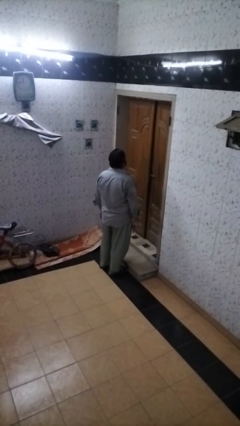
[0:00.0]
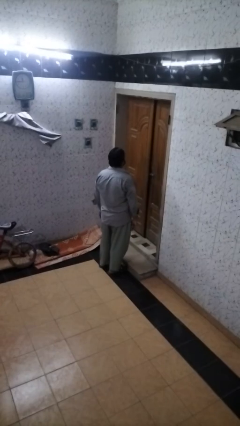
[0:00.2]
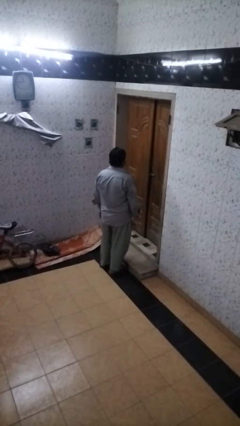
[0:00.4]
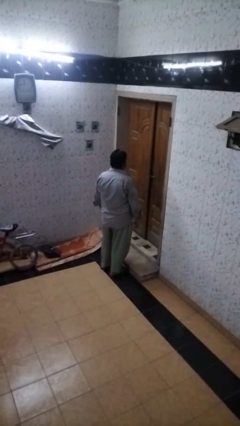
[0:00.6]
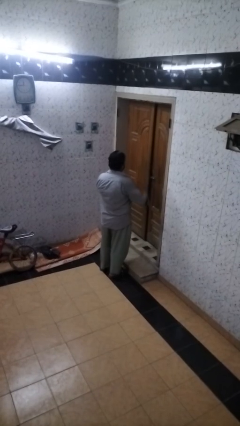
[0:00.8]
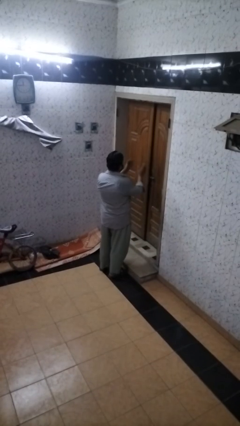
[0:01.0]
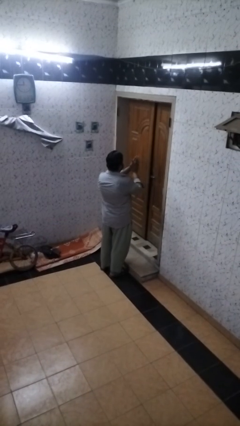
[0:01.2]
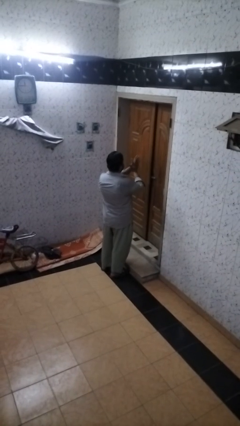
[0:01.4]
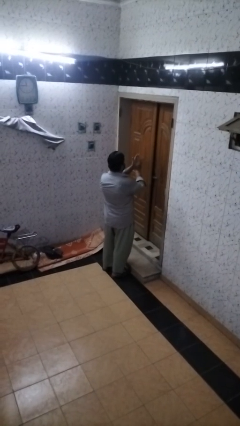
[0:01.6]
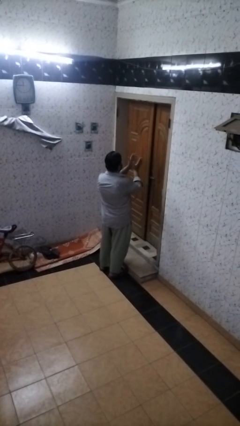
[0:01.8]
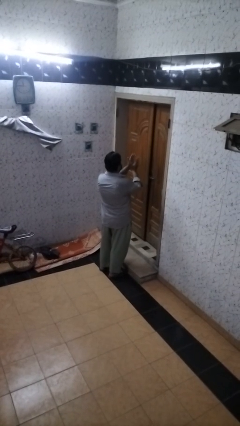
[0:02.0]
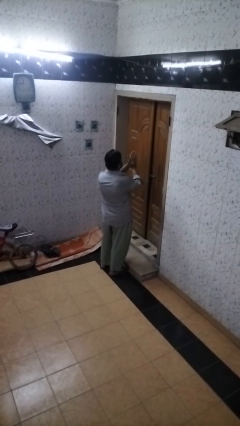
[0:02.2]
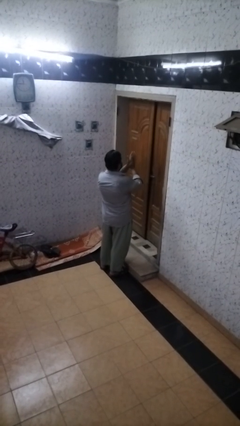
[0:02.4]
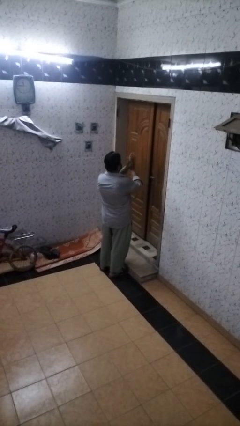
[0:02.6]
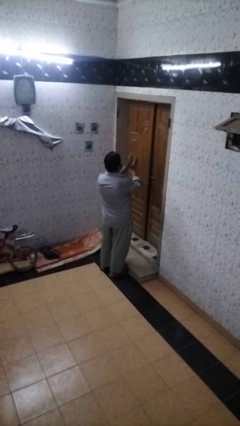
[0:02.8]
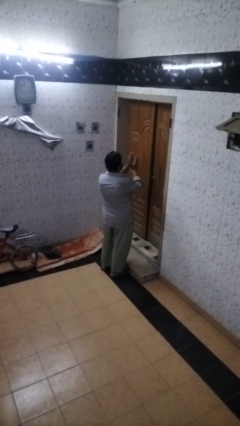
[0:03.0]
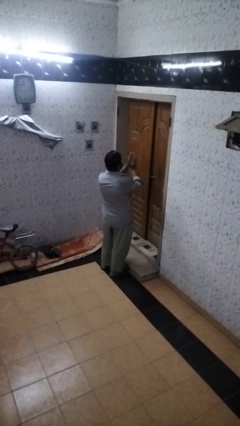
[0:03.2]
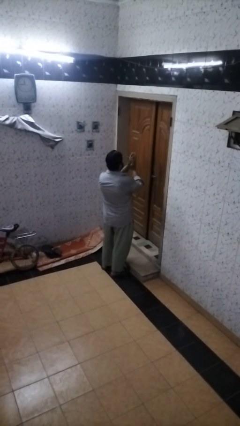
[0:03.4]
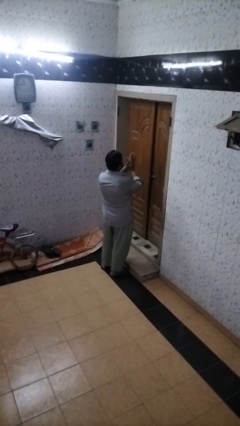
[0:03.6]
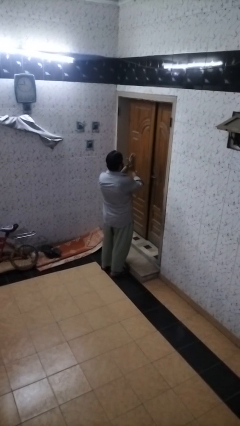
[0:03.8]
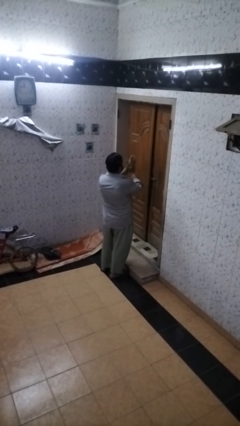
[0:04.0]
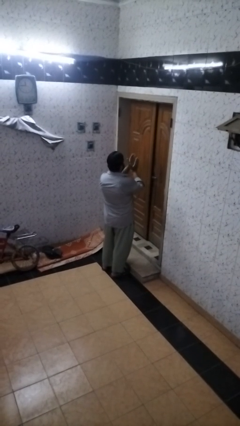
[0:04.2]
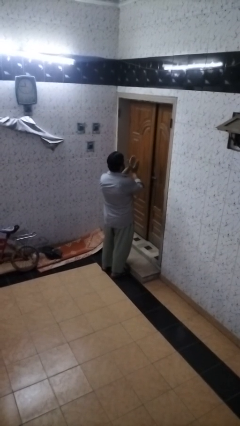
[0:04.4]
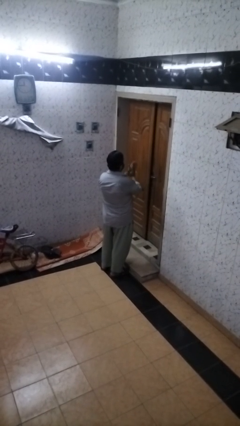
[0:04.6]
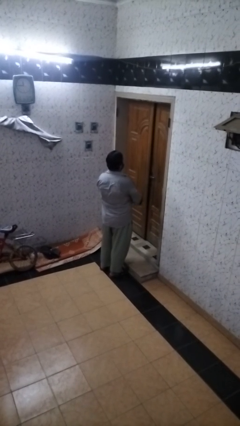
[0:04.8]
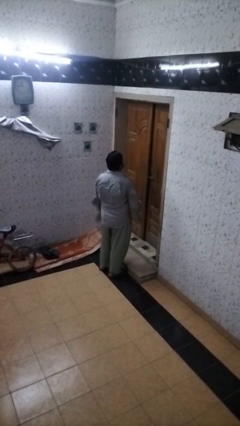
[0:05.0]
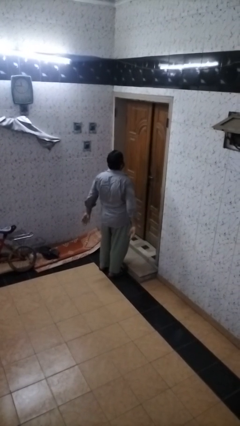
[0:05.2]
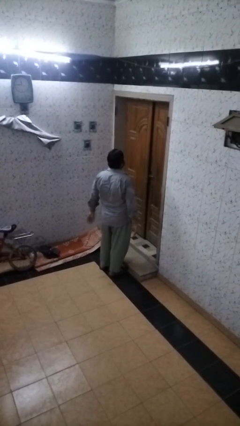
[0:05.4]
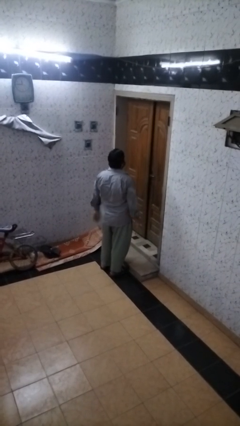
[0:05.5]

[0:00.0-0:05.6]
person claps hands

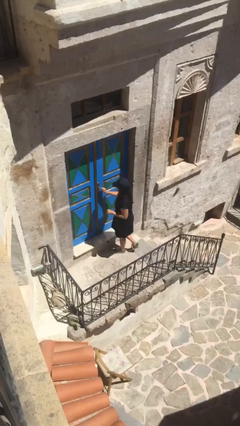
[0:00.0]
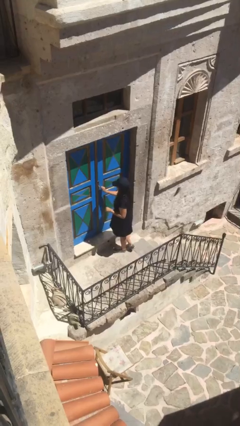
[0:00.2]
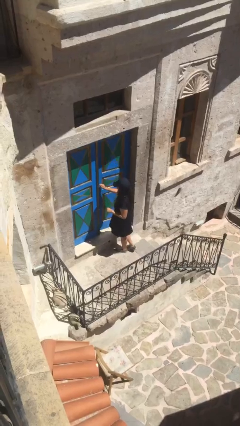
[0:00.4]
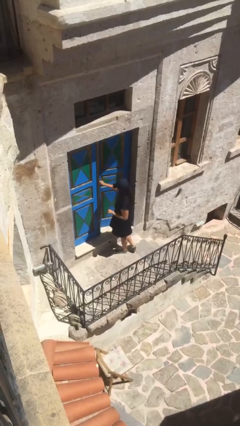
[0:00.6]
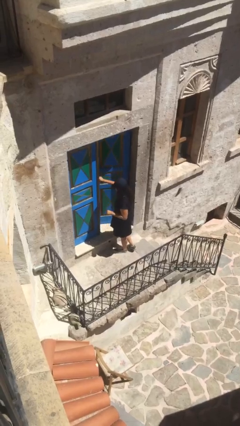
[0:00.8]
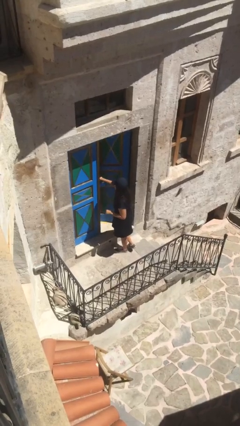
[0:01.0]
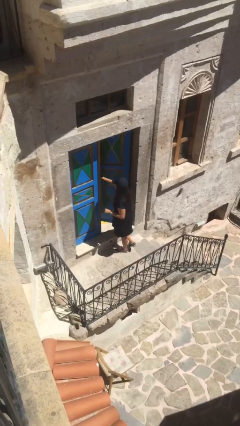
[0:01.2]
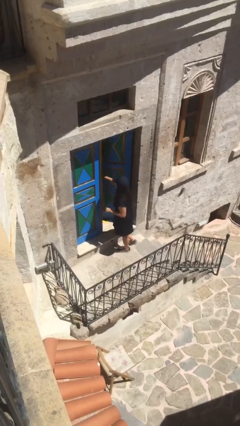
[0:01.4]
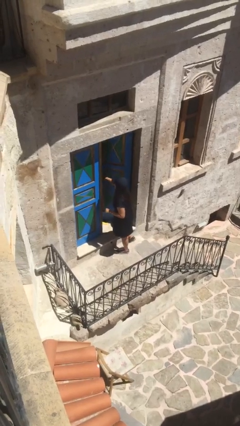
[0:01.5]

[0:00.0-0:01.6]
person opens facility door

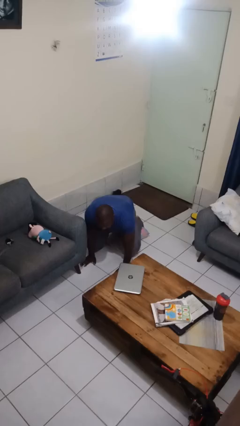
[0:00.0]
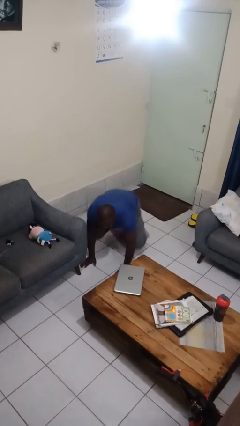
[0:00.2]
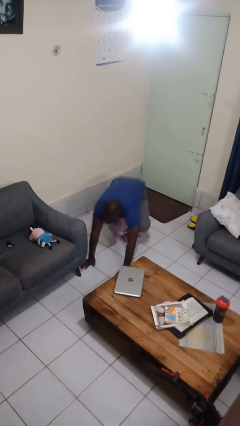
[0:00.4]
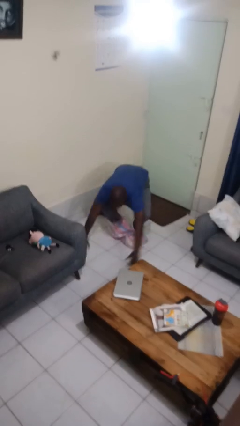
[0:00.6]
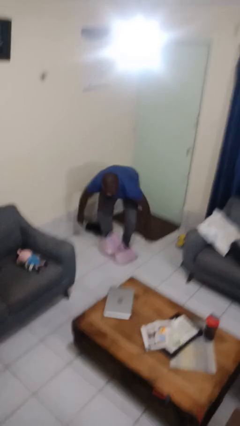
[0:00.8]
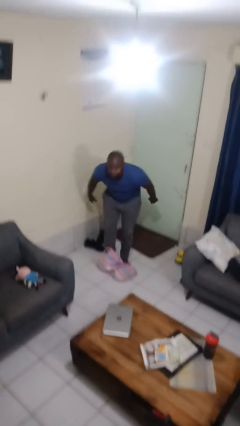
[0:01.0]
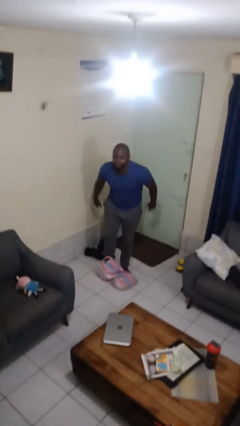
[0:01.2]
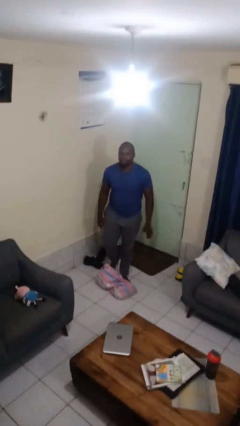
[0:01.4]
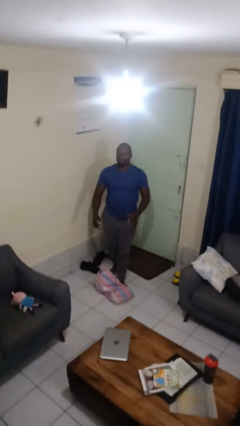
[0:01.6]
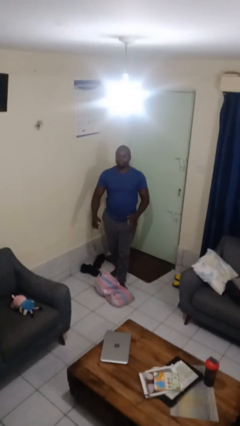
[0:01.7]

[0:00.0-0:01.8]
person stands up from floor

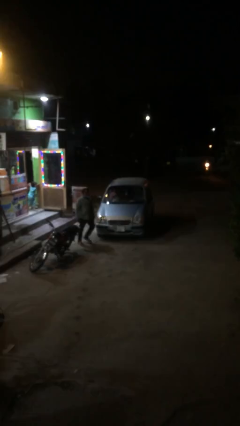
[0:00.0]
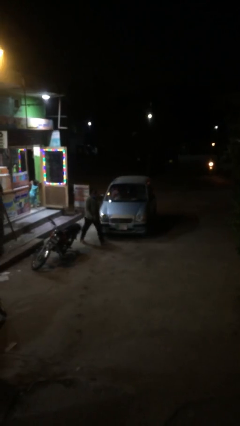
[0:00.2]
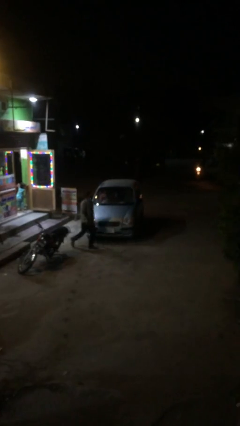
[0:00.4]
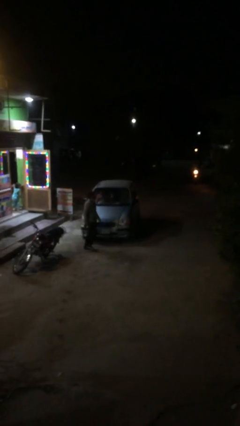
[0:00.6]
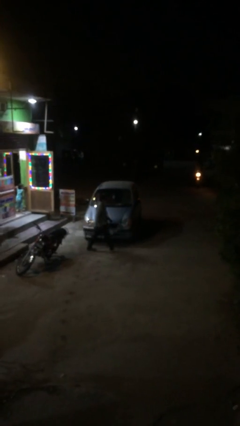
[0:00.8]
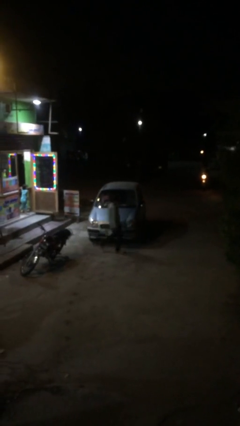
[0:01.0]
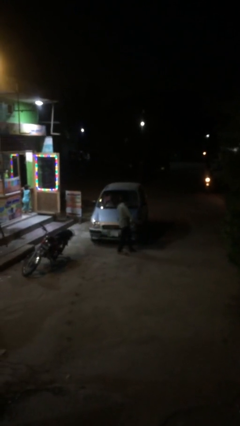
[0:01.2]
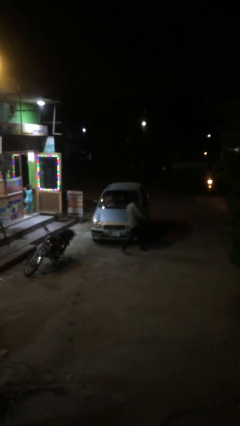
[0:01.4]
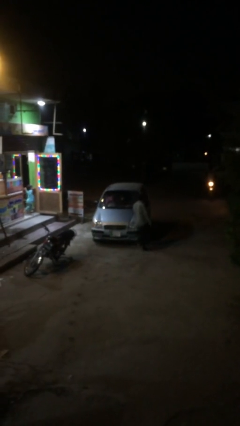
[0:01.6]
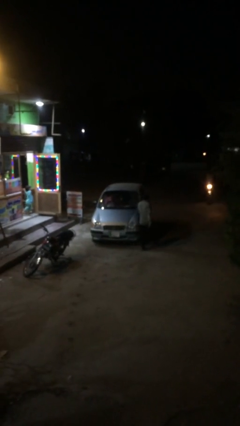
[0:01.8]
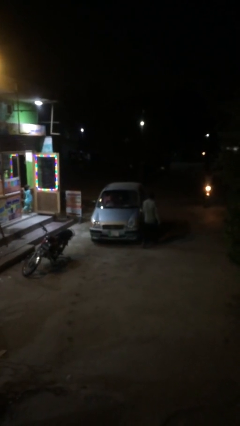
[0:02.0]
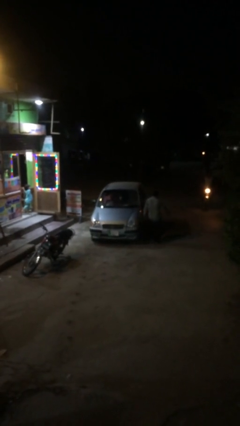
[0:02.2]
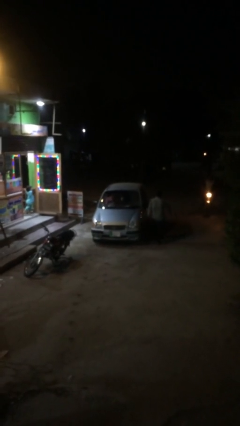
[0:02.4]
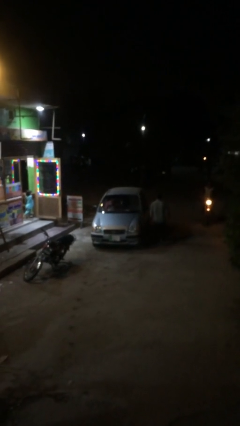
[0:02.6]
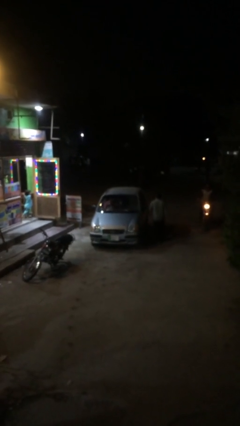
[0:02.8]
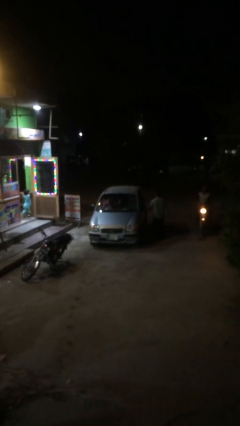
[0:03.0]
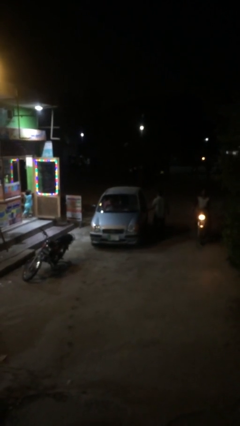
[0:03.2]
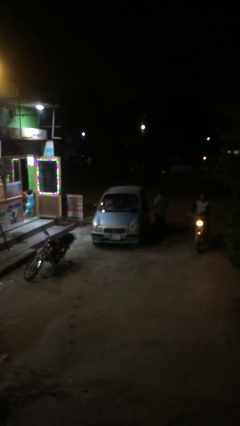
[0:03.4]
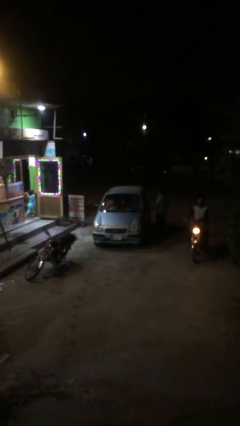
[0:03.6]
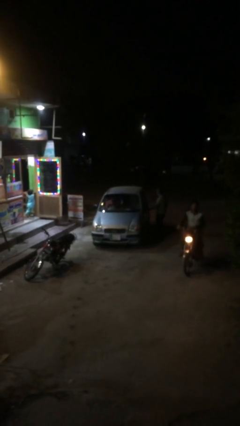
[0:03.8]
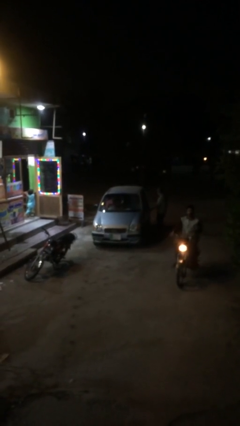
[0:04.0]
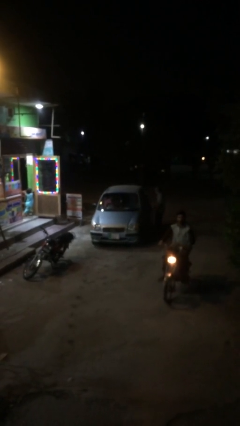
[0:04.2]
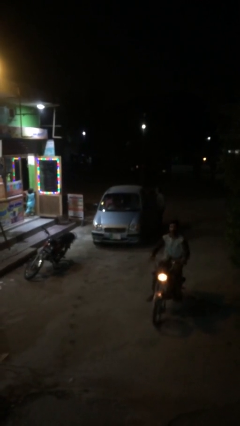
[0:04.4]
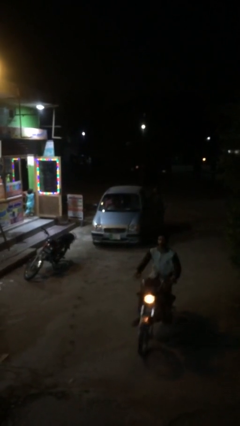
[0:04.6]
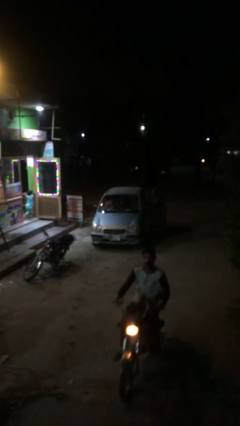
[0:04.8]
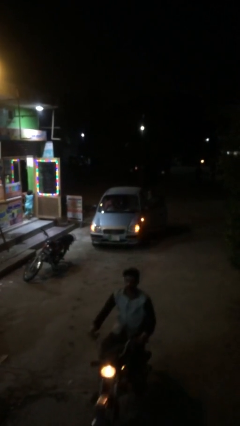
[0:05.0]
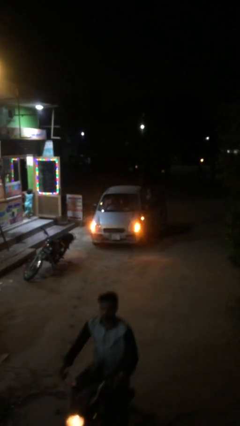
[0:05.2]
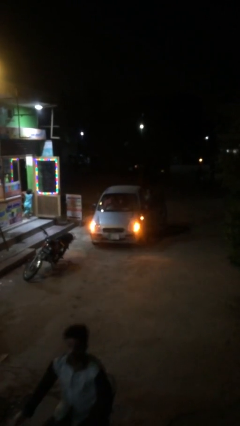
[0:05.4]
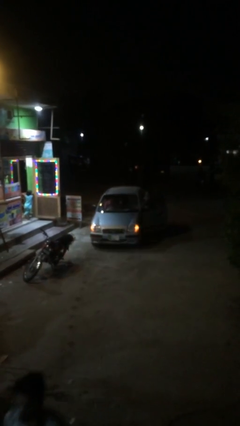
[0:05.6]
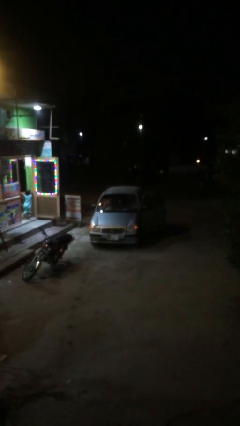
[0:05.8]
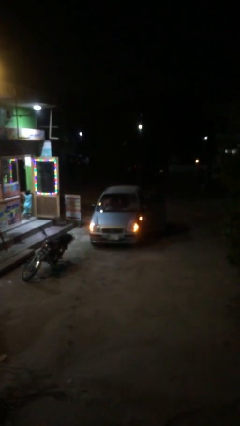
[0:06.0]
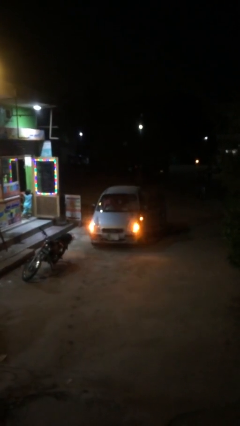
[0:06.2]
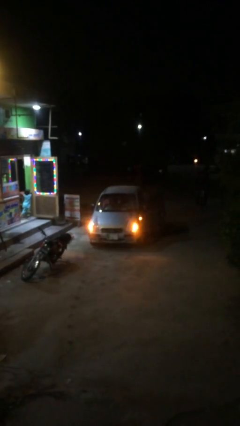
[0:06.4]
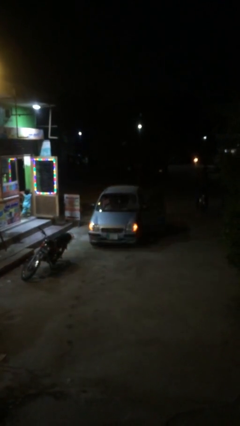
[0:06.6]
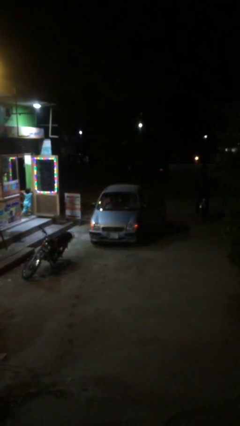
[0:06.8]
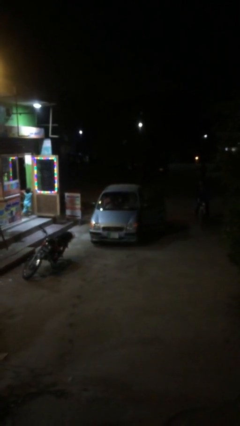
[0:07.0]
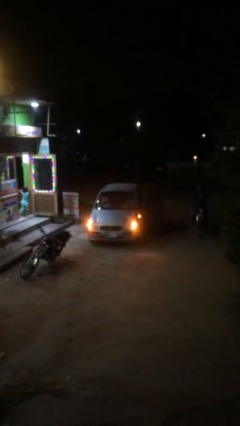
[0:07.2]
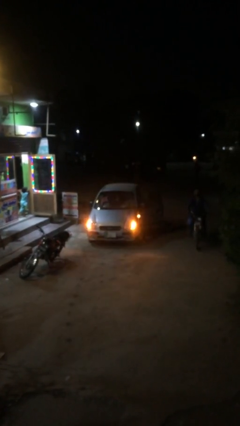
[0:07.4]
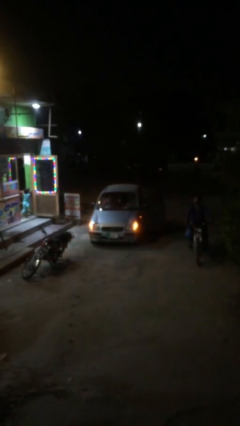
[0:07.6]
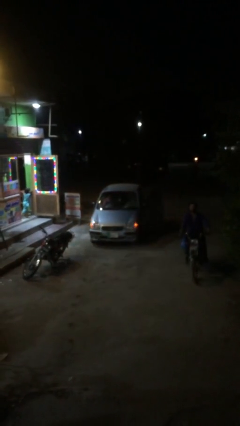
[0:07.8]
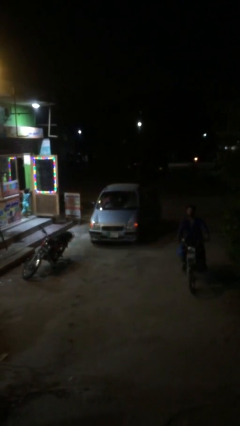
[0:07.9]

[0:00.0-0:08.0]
car picks up person

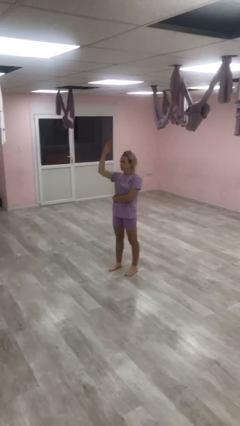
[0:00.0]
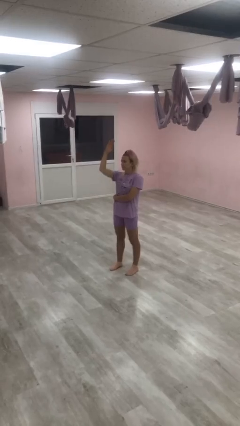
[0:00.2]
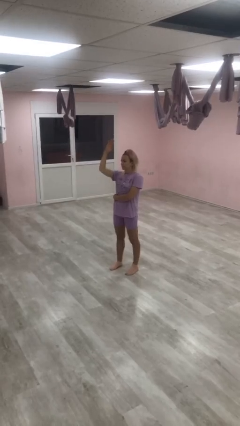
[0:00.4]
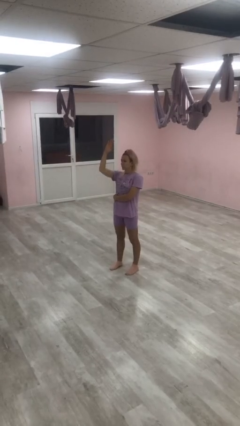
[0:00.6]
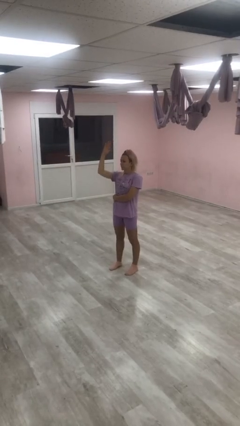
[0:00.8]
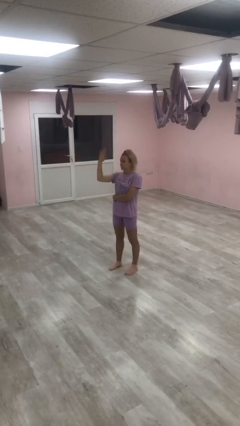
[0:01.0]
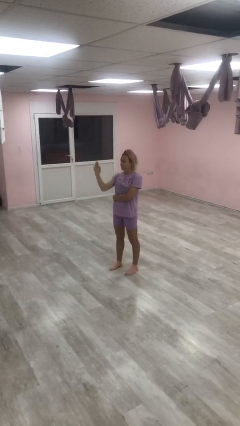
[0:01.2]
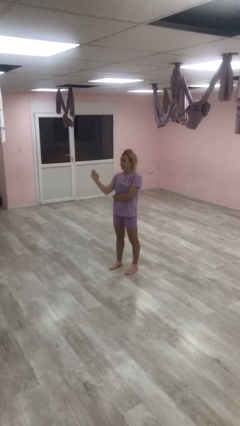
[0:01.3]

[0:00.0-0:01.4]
person gestures raise hand
